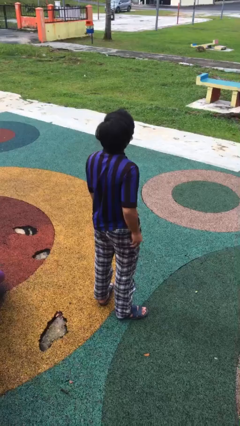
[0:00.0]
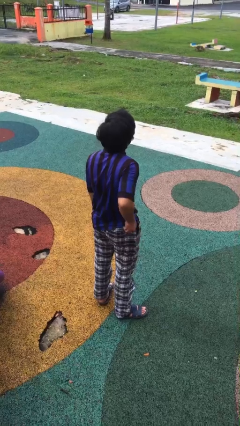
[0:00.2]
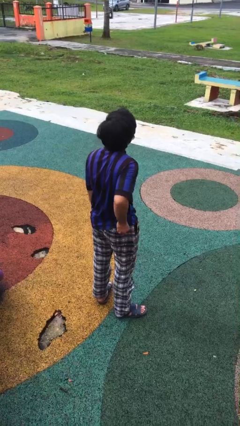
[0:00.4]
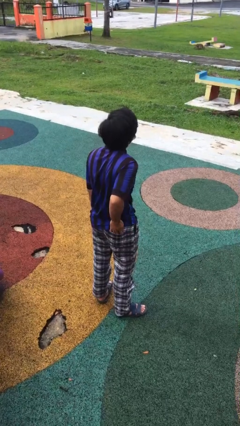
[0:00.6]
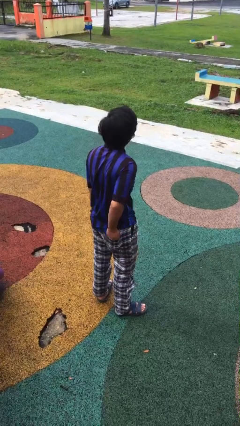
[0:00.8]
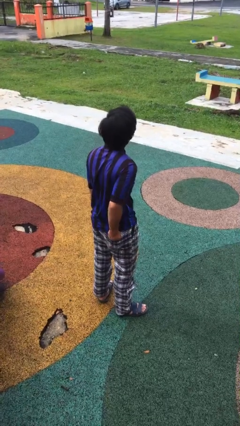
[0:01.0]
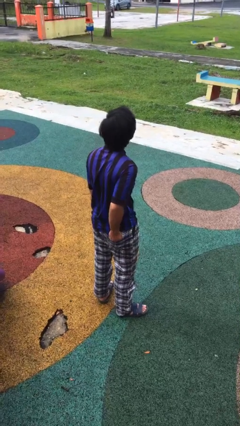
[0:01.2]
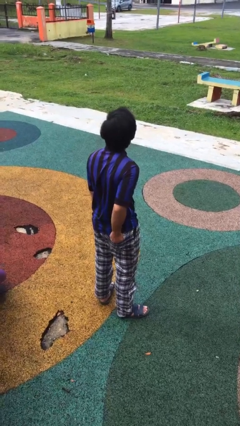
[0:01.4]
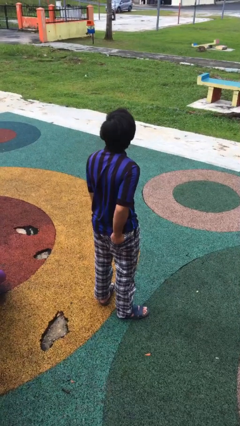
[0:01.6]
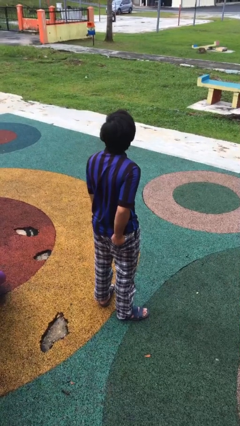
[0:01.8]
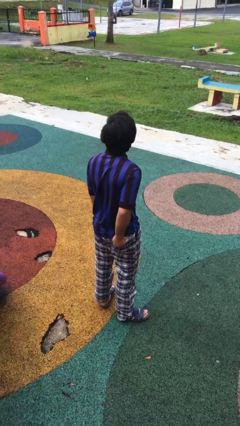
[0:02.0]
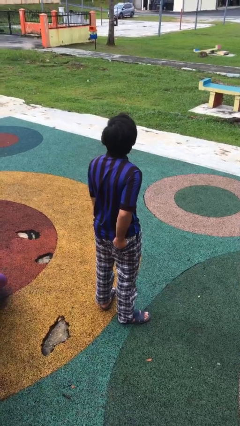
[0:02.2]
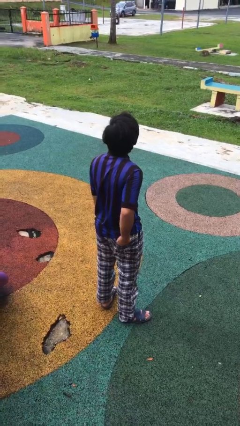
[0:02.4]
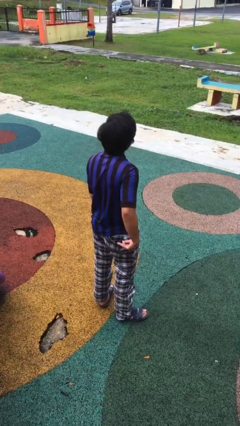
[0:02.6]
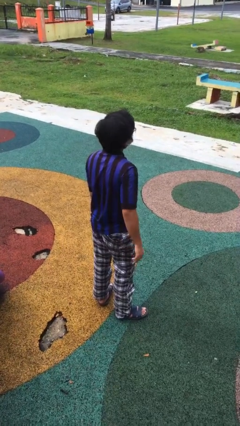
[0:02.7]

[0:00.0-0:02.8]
person puts hands in back pockets

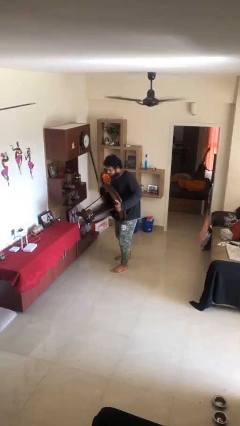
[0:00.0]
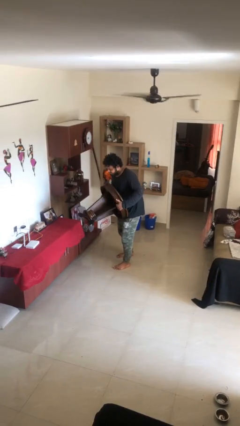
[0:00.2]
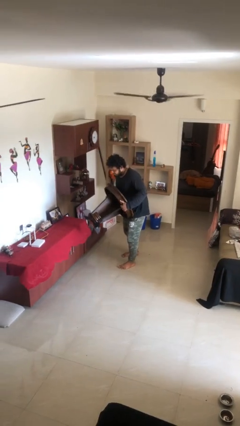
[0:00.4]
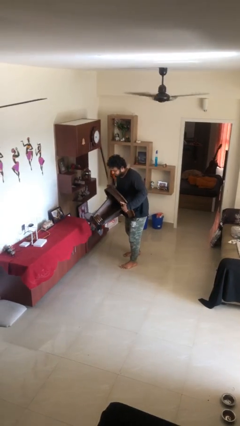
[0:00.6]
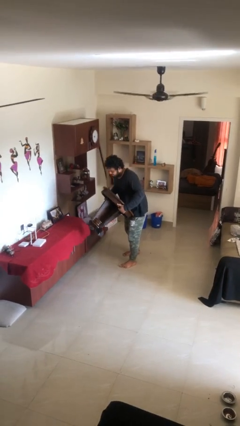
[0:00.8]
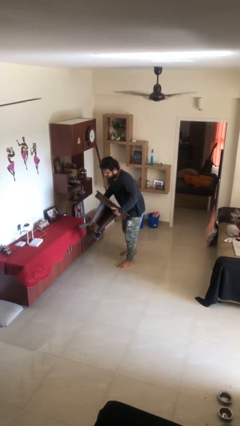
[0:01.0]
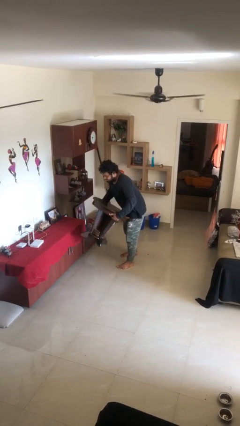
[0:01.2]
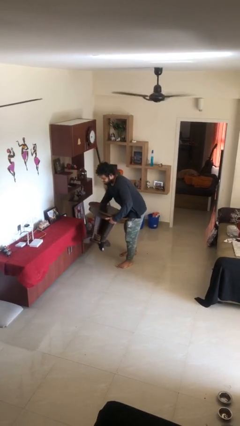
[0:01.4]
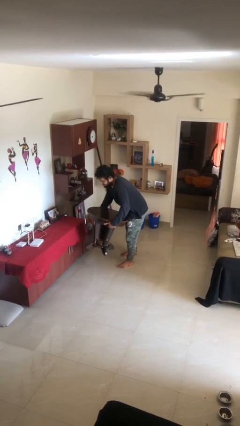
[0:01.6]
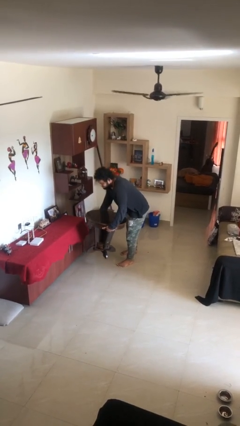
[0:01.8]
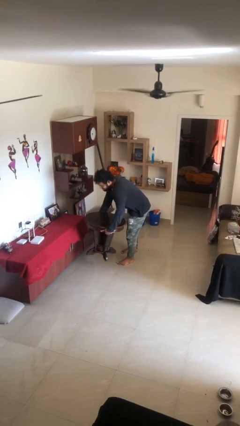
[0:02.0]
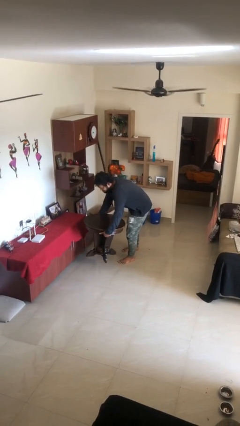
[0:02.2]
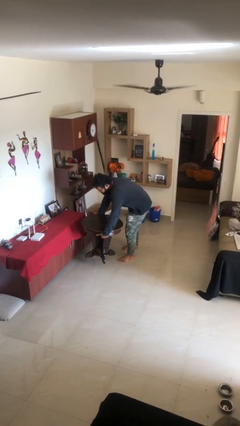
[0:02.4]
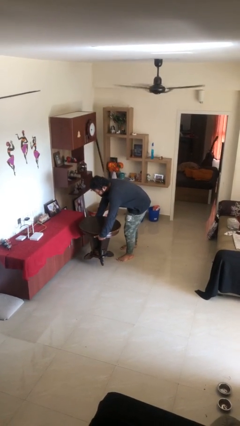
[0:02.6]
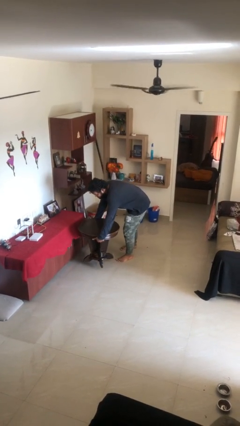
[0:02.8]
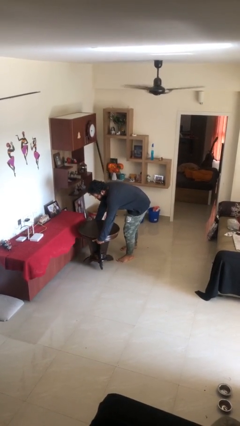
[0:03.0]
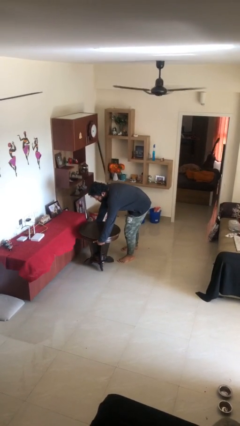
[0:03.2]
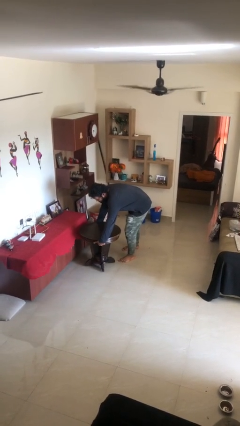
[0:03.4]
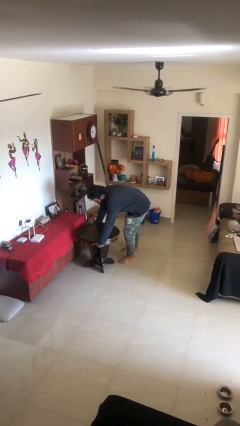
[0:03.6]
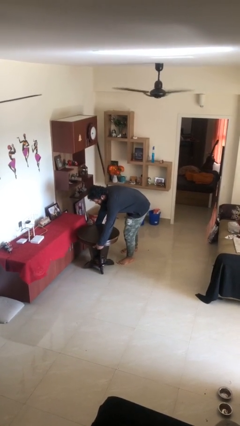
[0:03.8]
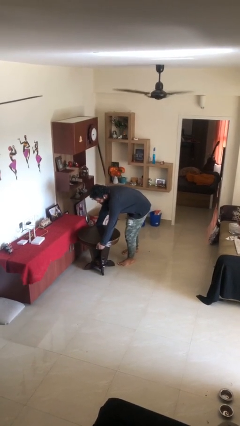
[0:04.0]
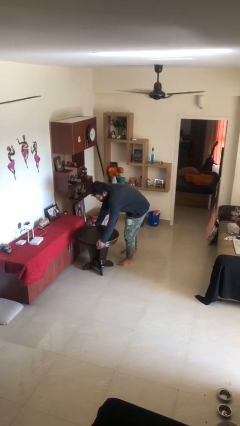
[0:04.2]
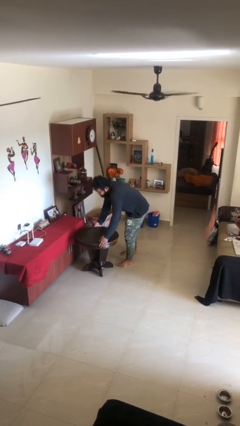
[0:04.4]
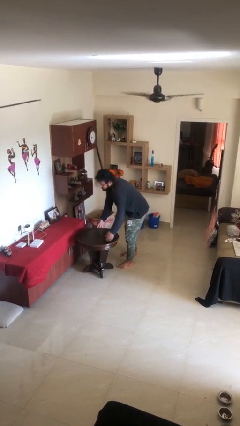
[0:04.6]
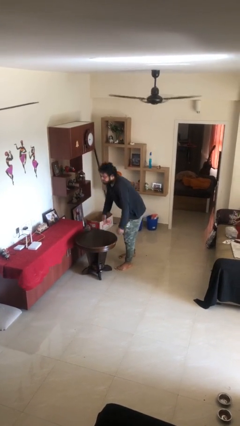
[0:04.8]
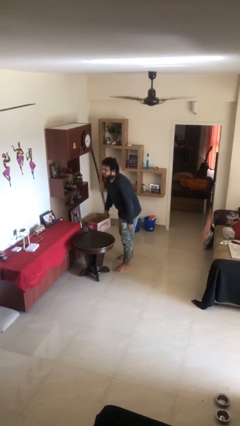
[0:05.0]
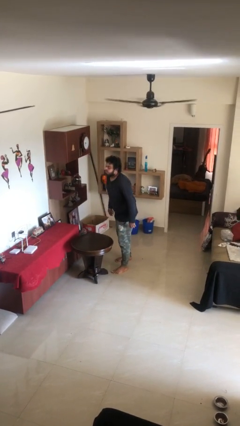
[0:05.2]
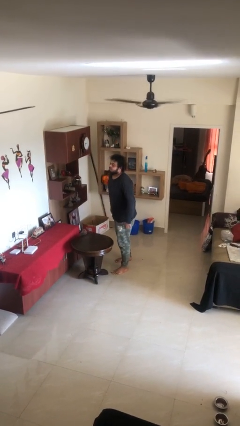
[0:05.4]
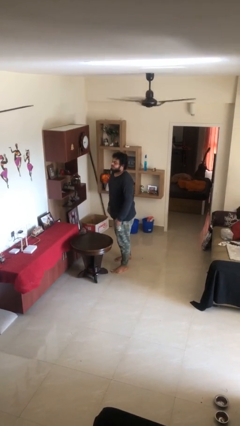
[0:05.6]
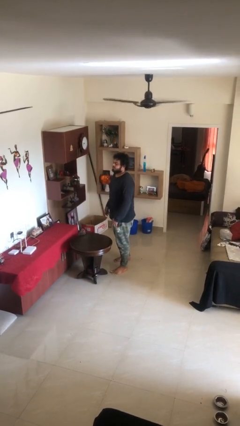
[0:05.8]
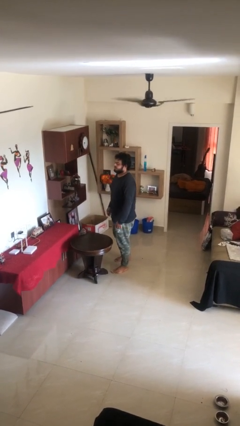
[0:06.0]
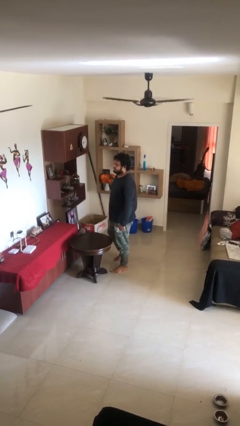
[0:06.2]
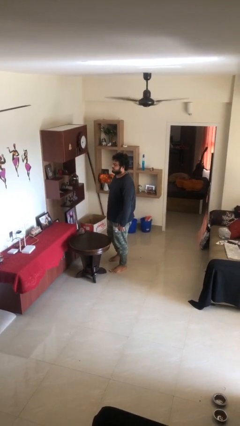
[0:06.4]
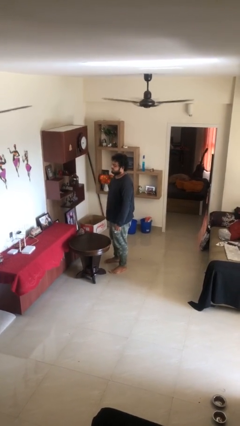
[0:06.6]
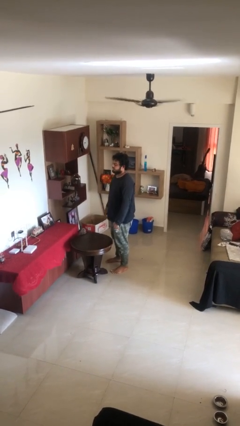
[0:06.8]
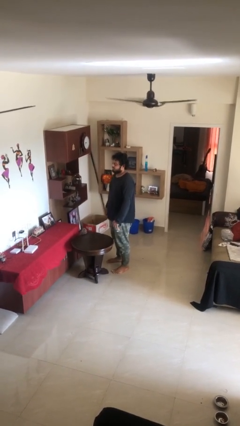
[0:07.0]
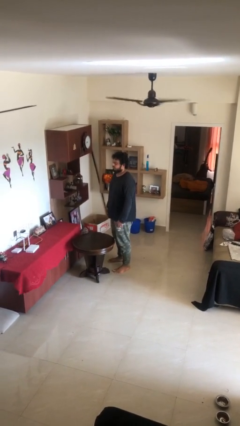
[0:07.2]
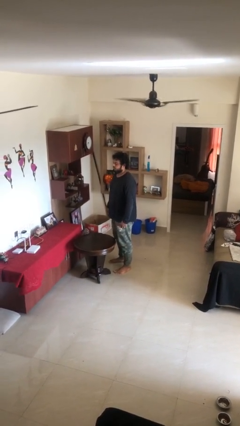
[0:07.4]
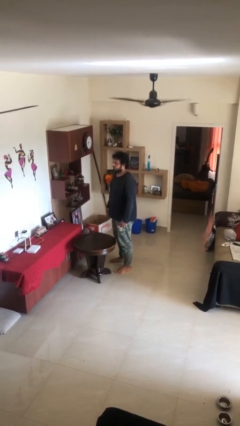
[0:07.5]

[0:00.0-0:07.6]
person puts down object on floor

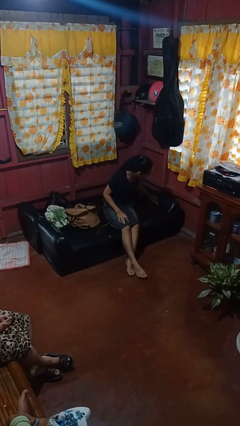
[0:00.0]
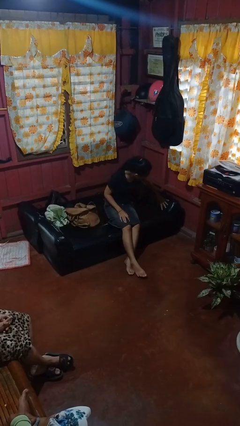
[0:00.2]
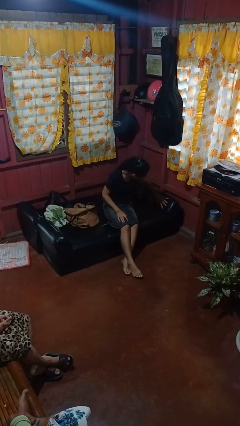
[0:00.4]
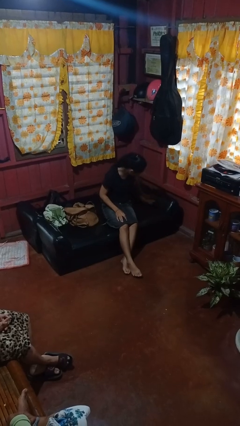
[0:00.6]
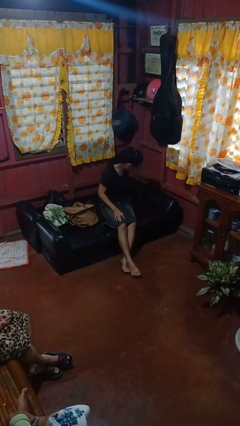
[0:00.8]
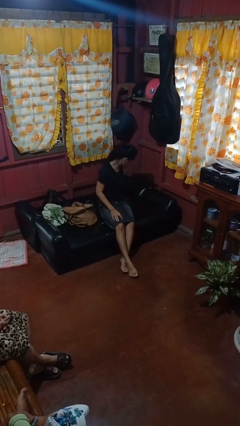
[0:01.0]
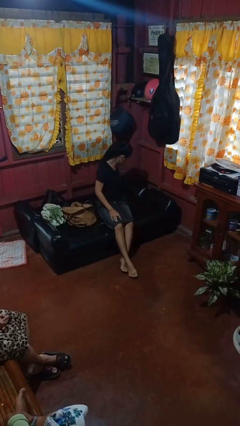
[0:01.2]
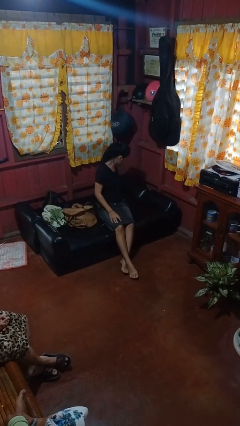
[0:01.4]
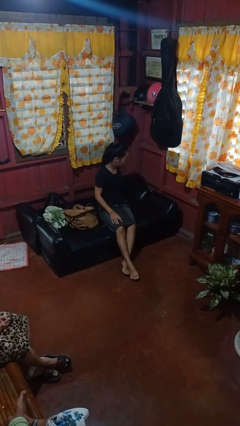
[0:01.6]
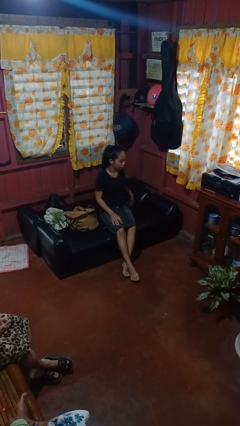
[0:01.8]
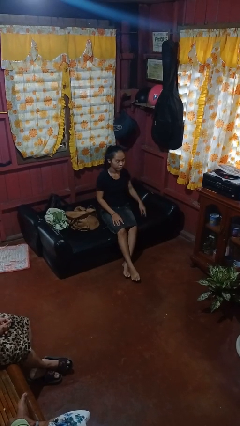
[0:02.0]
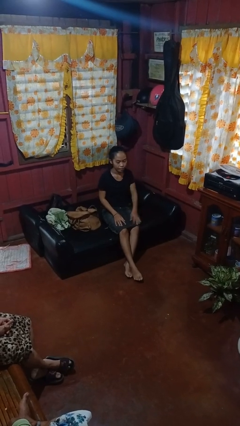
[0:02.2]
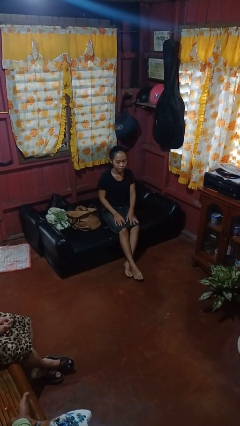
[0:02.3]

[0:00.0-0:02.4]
person searches in couch

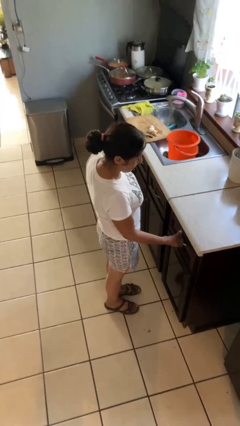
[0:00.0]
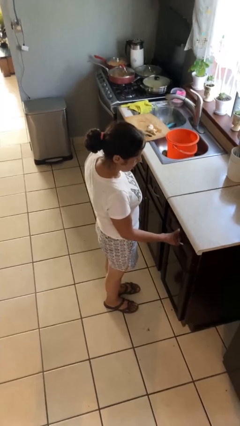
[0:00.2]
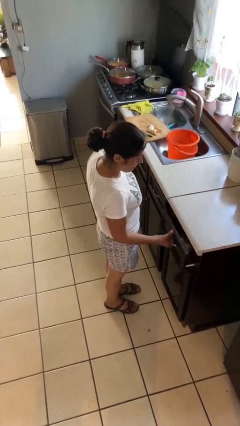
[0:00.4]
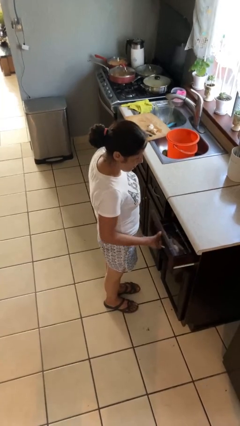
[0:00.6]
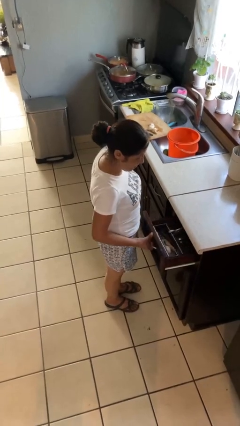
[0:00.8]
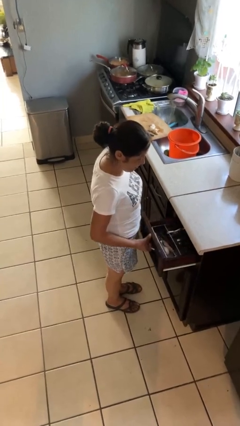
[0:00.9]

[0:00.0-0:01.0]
person opens kitchen drawer

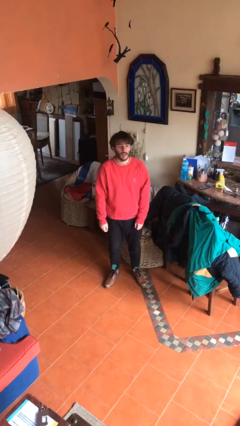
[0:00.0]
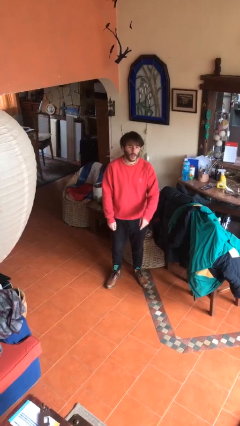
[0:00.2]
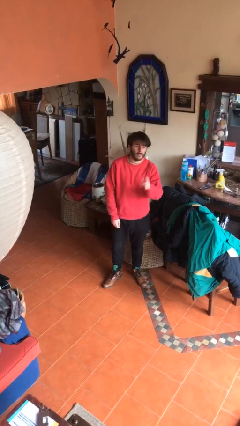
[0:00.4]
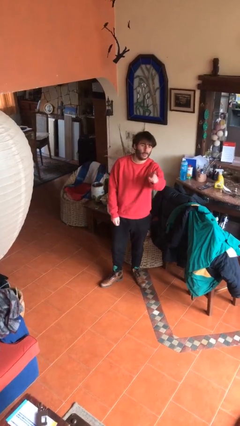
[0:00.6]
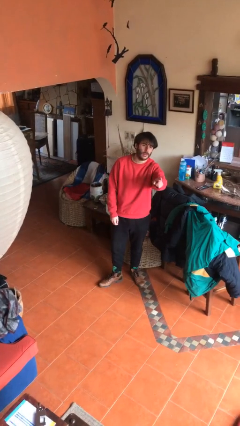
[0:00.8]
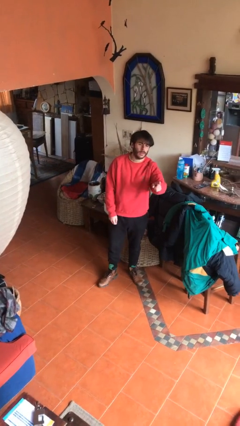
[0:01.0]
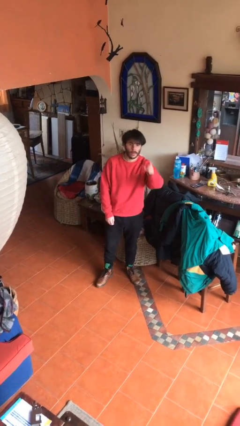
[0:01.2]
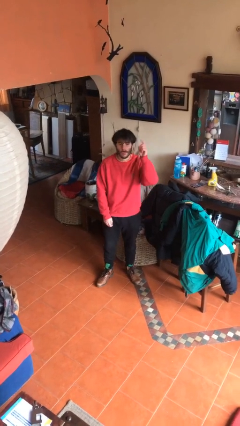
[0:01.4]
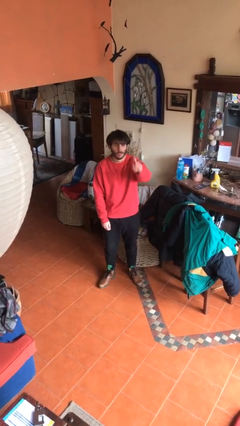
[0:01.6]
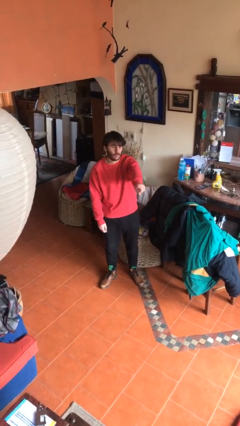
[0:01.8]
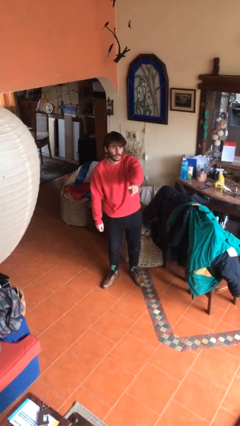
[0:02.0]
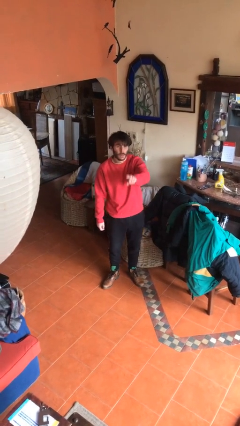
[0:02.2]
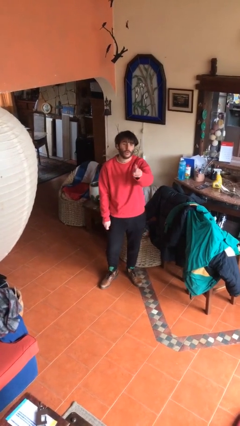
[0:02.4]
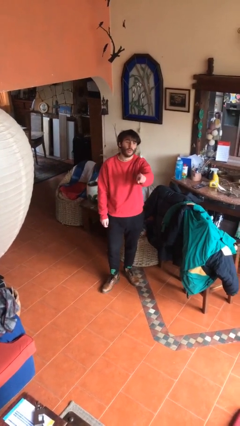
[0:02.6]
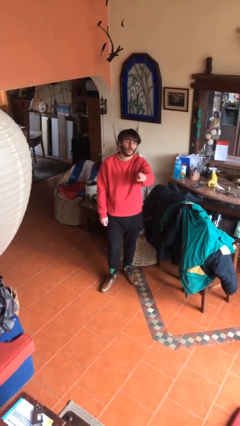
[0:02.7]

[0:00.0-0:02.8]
person points at person

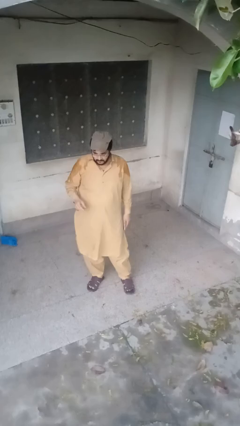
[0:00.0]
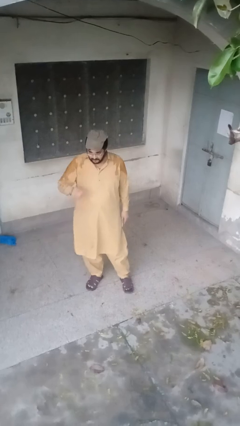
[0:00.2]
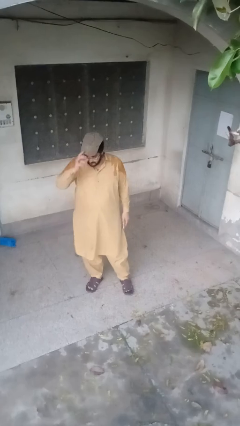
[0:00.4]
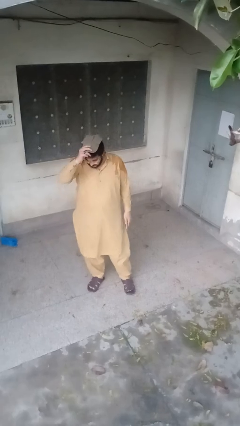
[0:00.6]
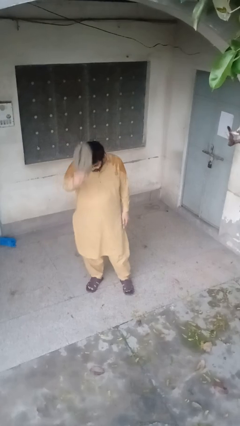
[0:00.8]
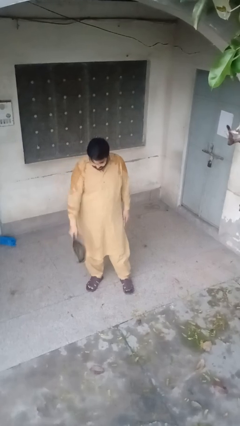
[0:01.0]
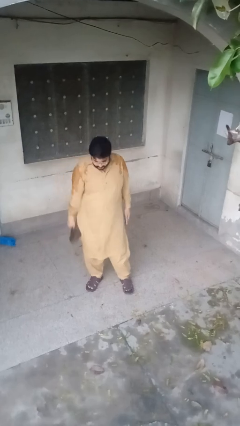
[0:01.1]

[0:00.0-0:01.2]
person takes off hat
